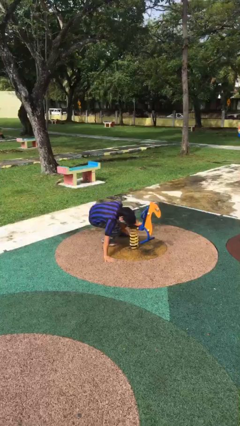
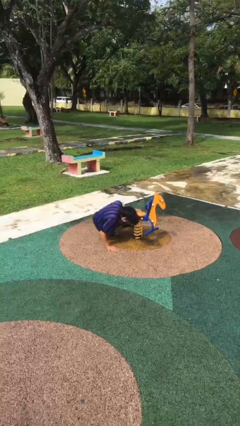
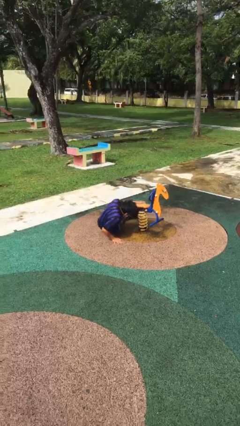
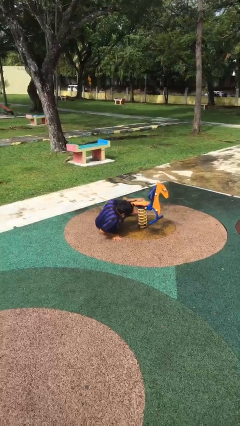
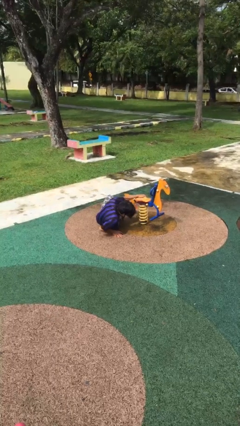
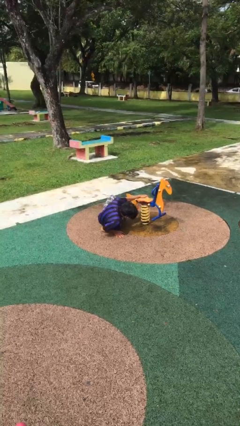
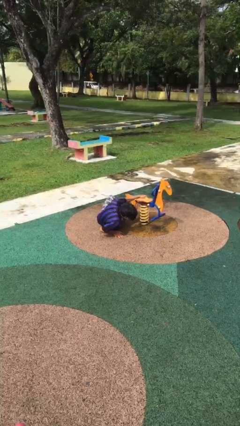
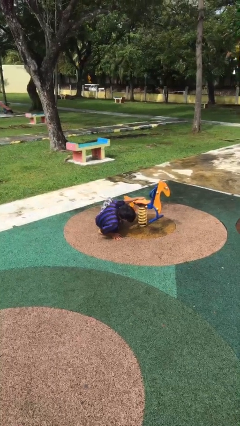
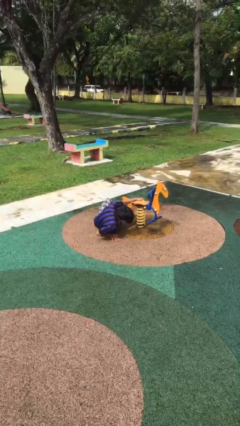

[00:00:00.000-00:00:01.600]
person lies down on floor

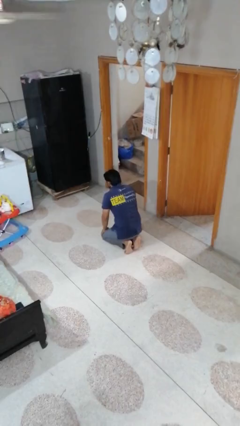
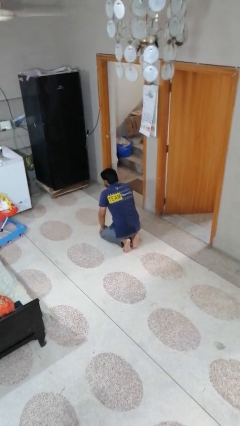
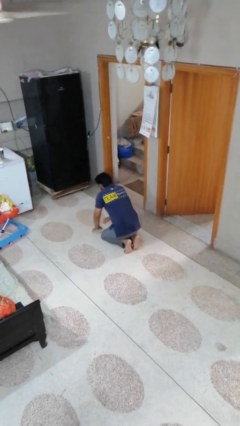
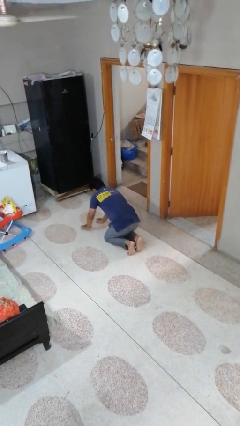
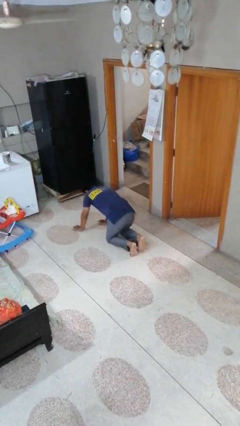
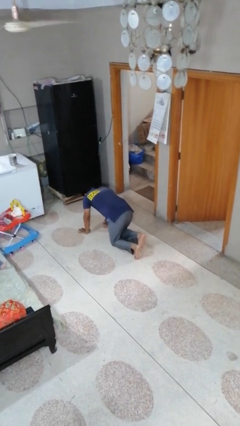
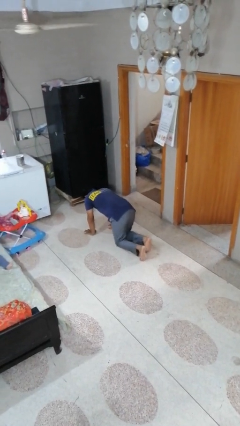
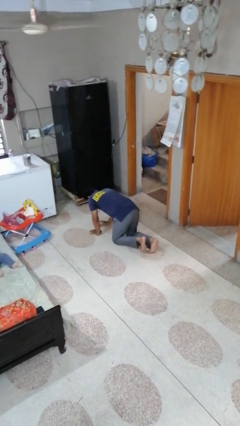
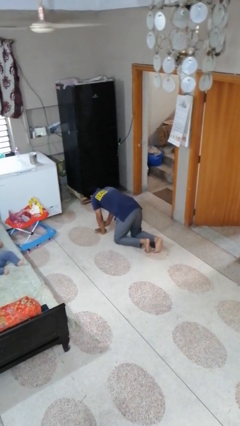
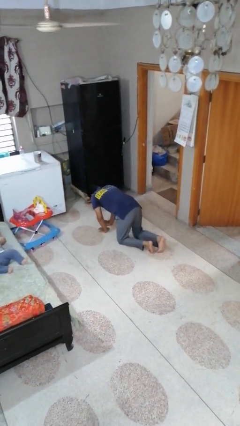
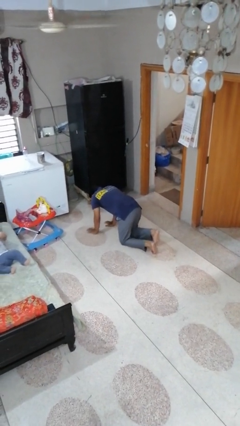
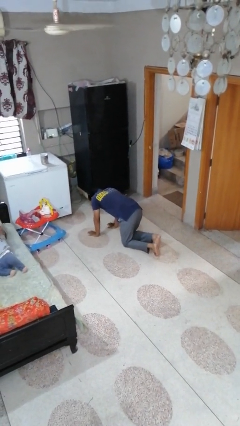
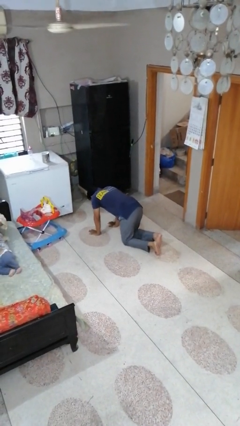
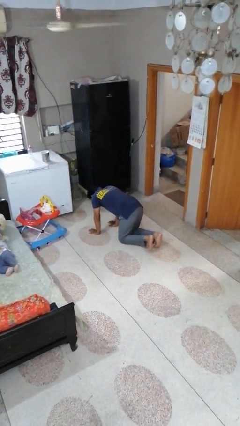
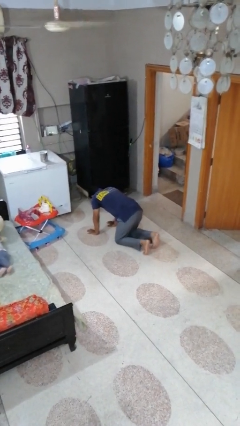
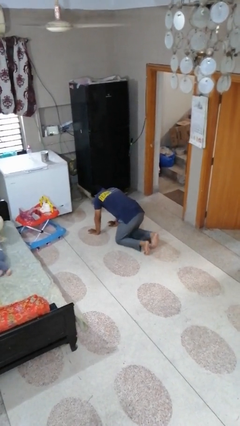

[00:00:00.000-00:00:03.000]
person crawls

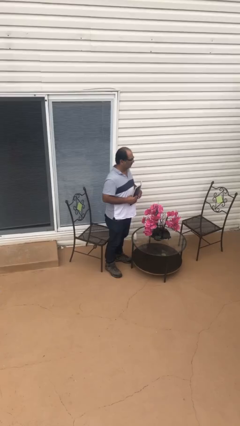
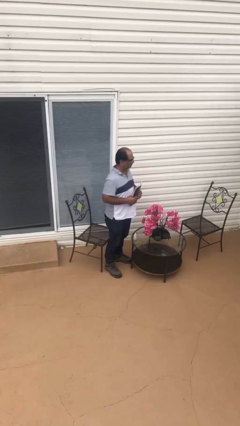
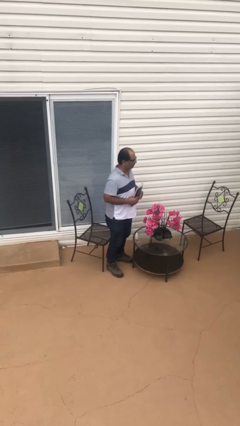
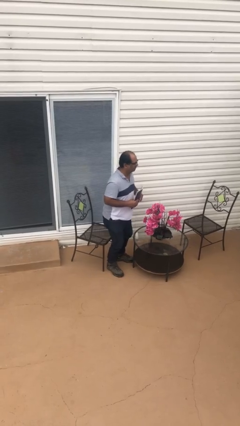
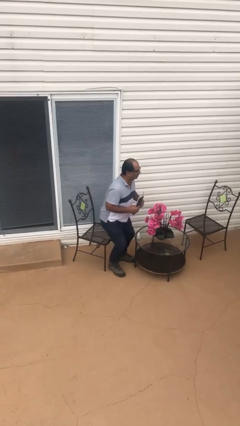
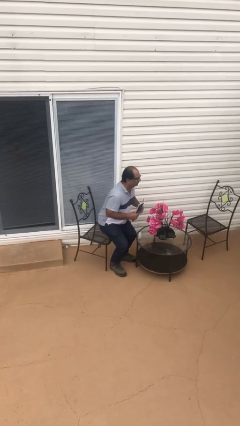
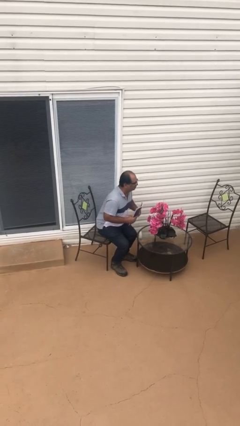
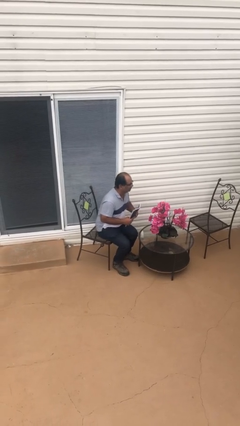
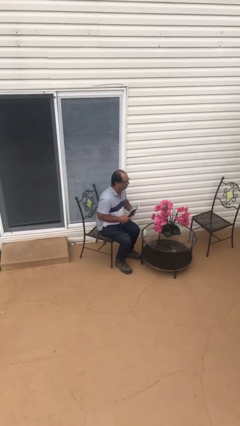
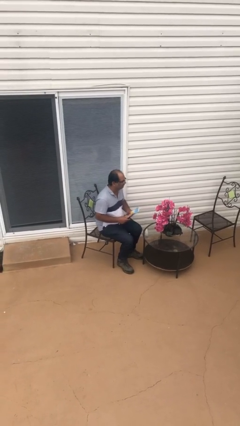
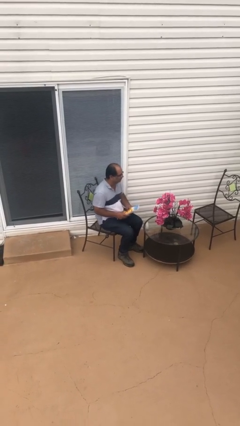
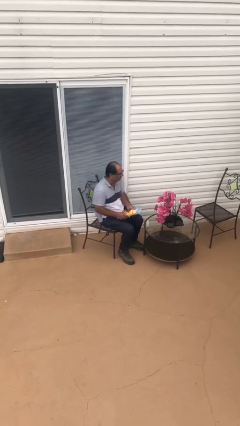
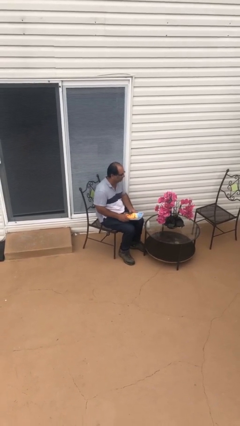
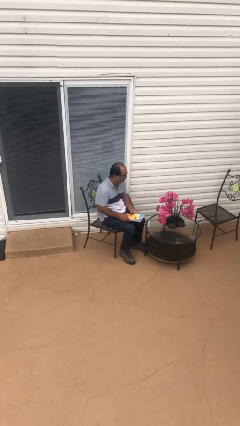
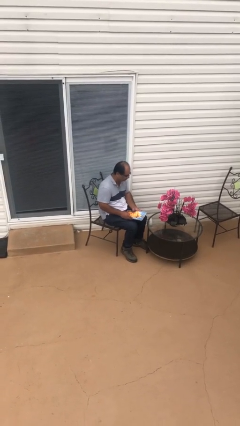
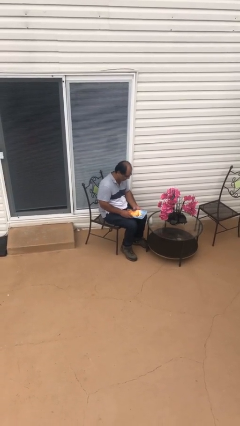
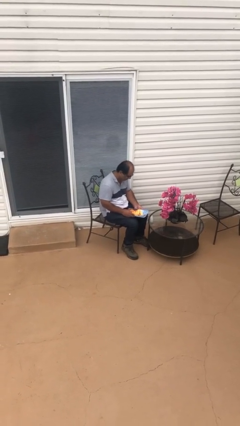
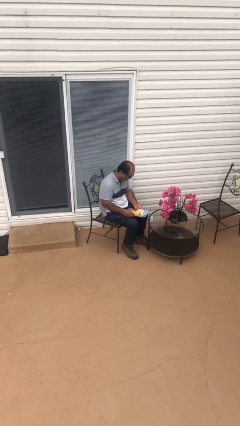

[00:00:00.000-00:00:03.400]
person sits down

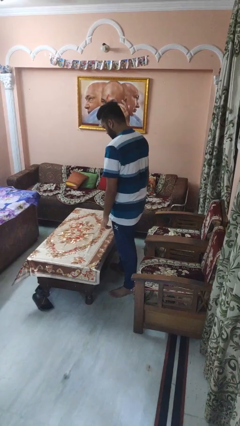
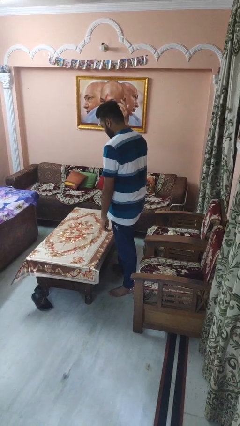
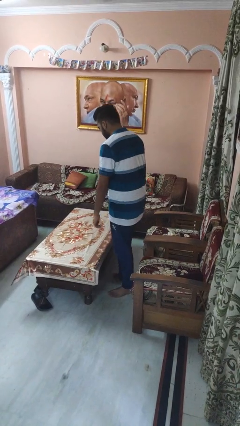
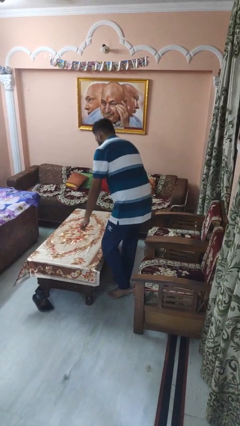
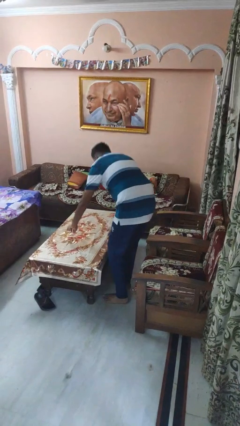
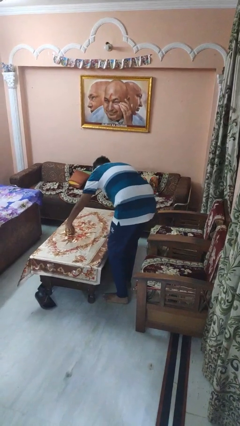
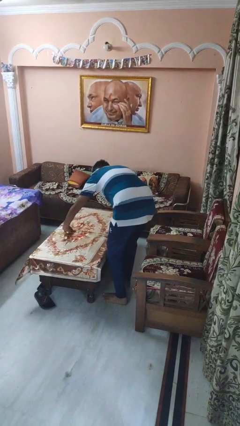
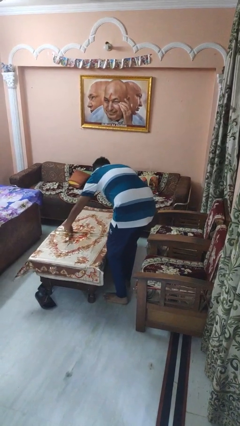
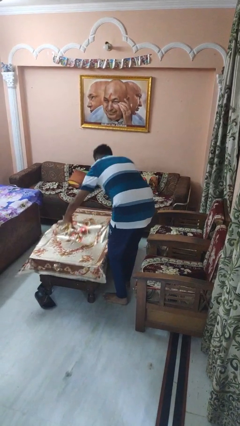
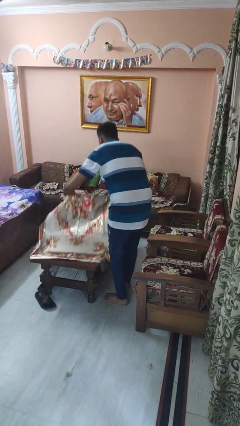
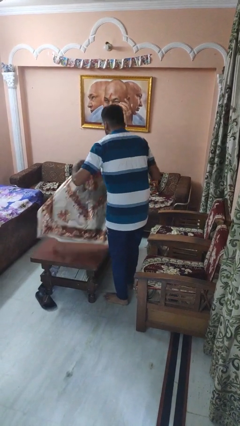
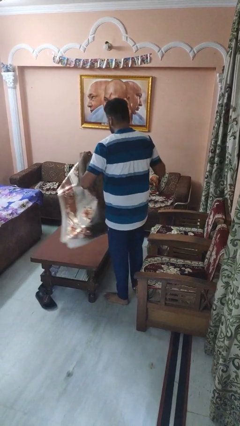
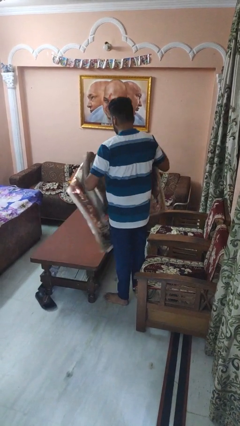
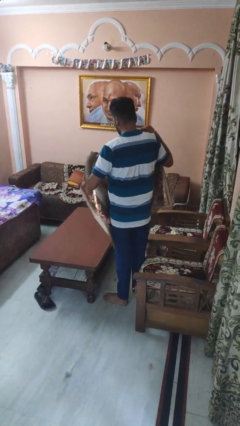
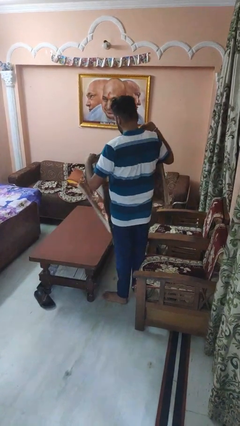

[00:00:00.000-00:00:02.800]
person folds tablecloth

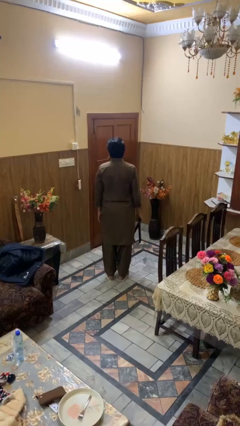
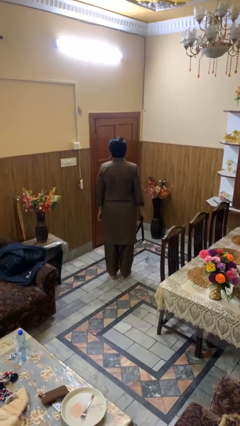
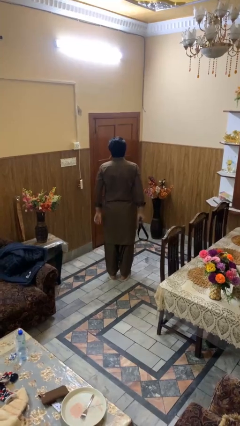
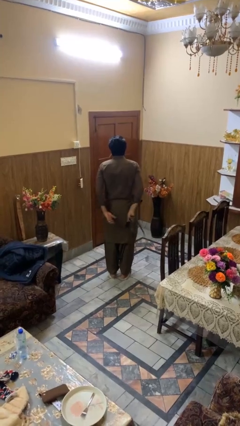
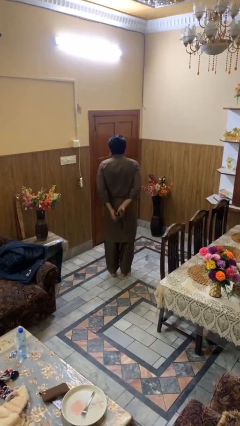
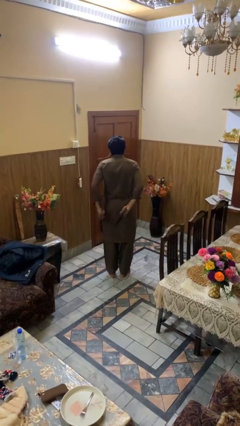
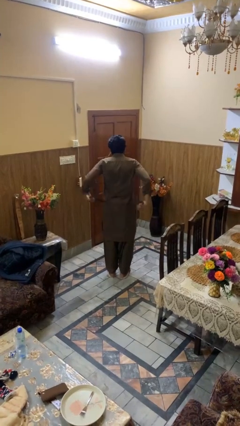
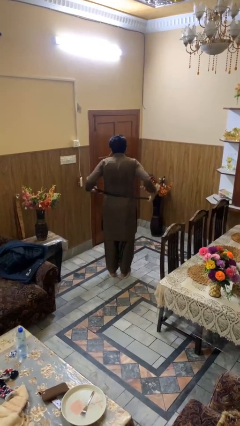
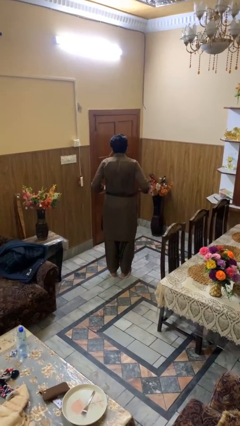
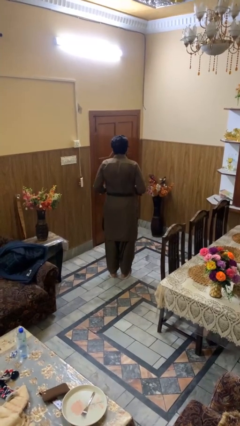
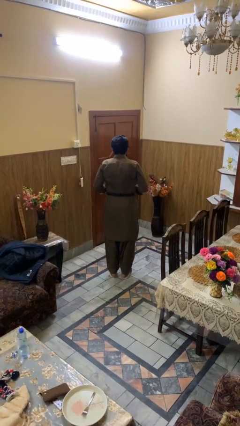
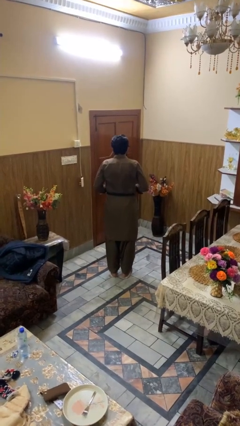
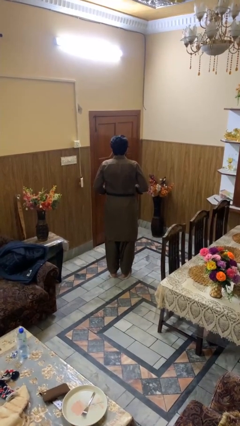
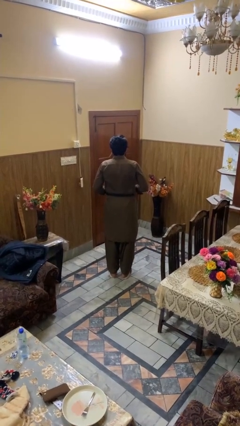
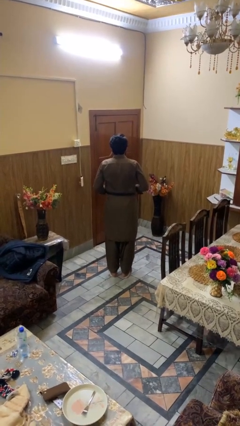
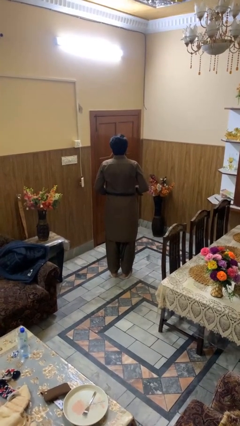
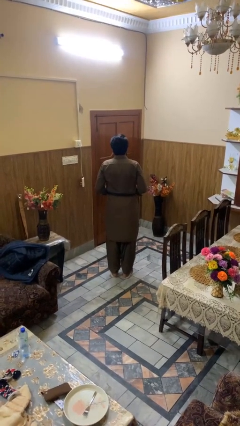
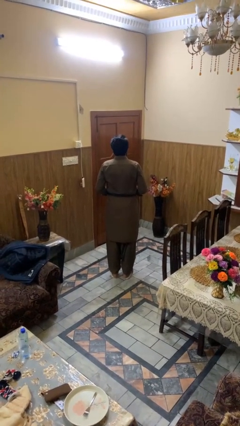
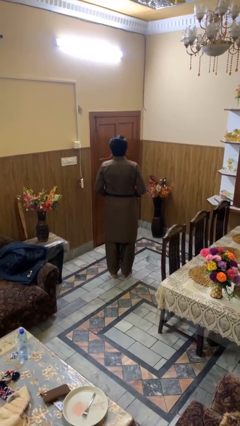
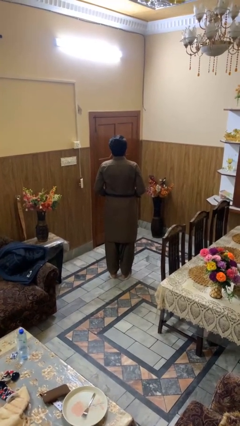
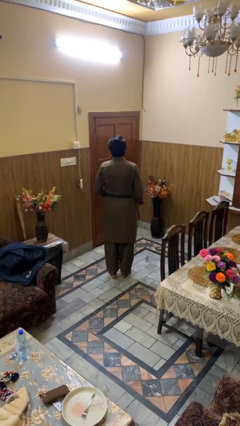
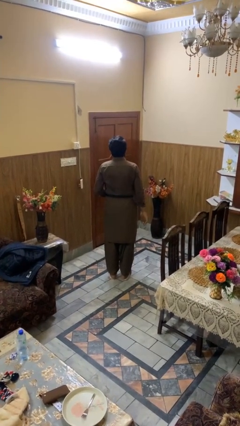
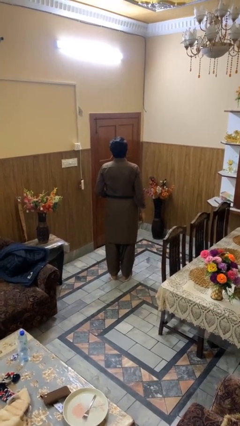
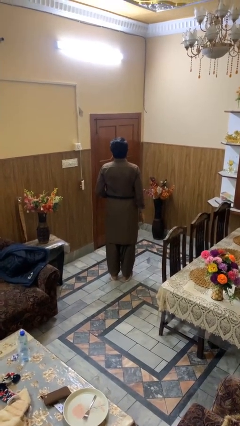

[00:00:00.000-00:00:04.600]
person puts on belt

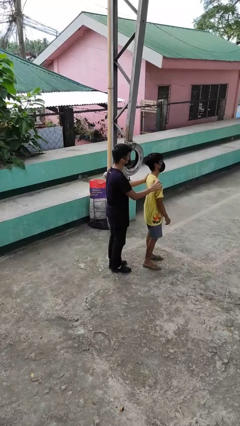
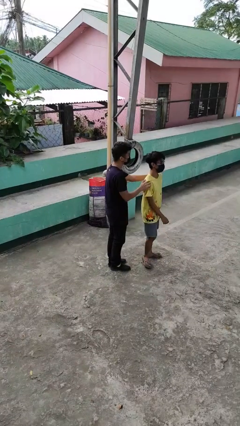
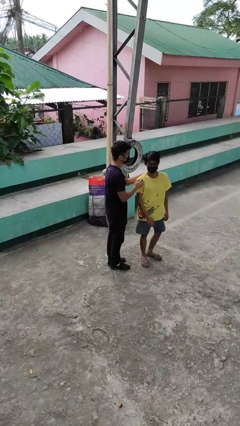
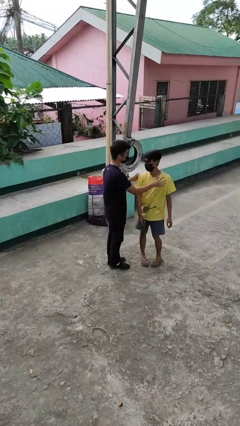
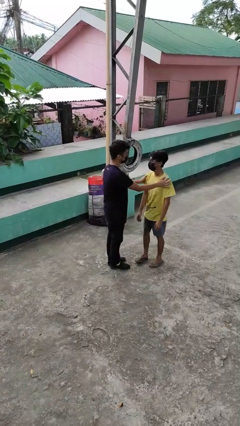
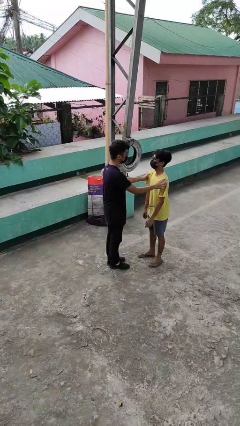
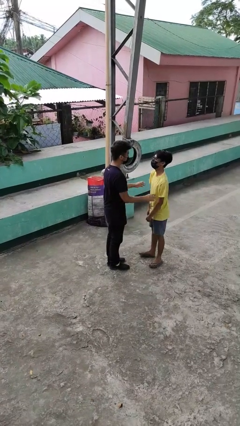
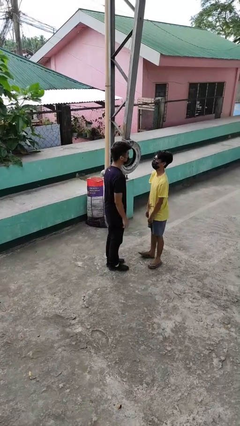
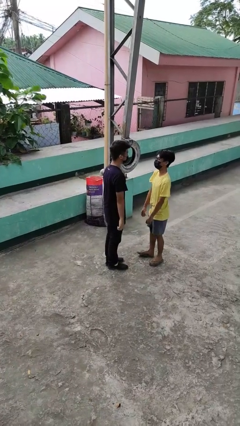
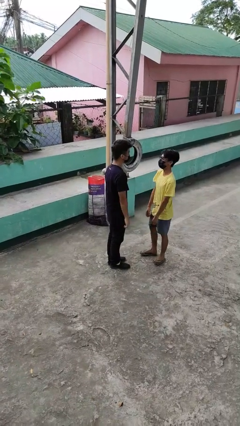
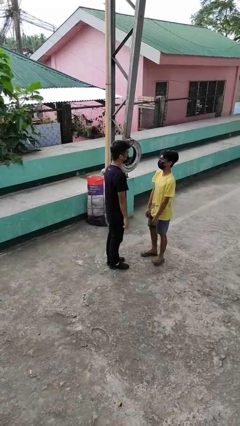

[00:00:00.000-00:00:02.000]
person spins person around
